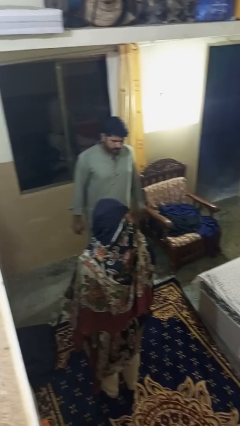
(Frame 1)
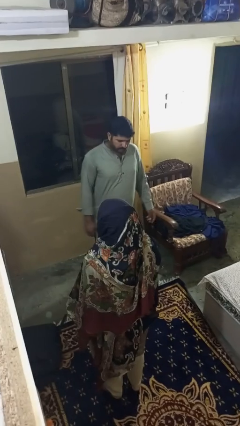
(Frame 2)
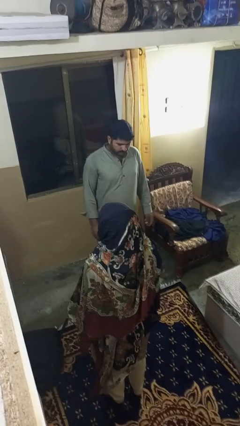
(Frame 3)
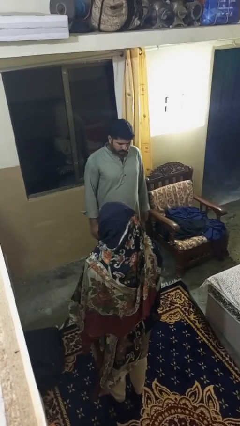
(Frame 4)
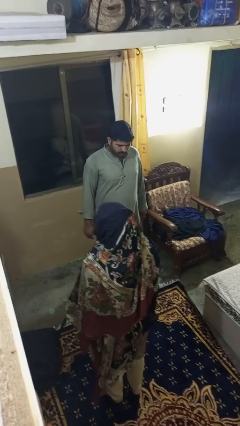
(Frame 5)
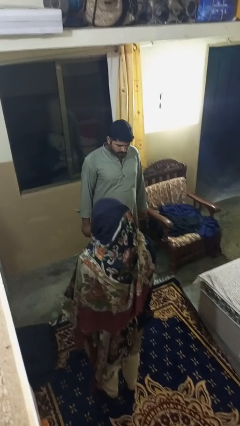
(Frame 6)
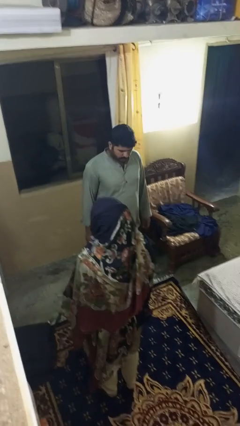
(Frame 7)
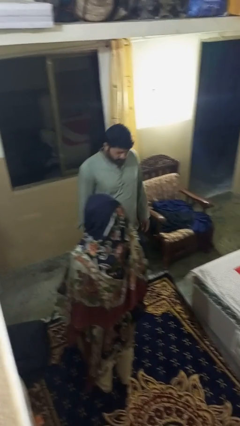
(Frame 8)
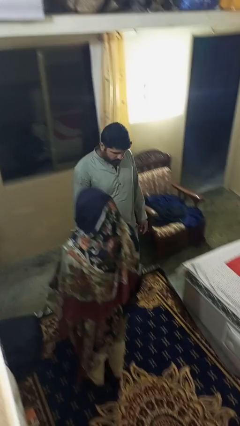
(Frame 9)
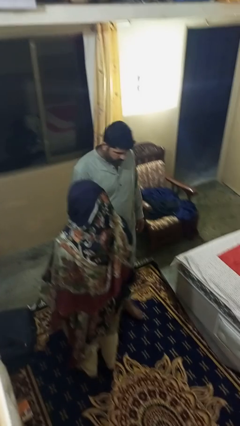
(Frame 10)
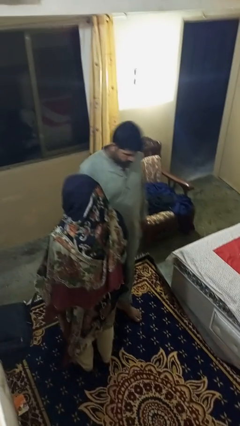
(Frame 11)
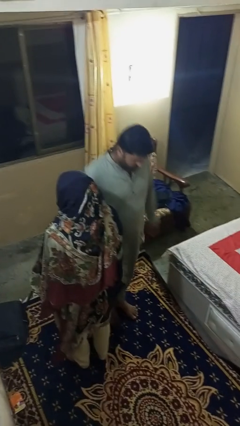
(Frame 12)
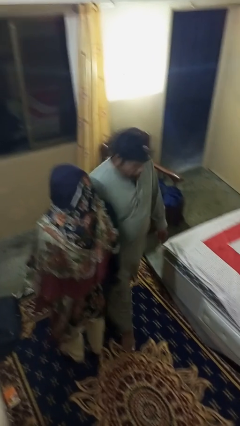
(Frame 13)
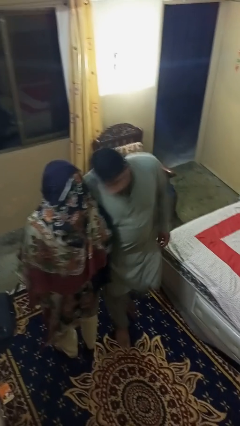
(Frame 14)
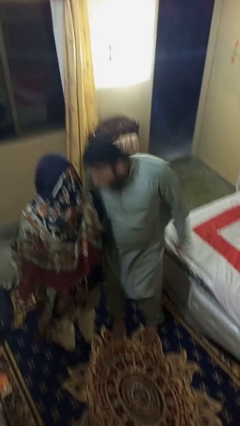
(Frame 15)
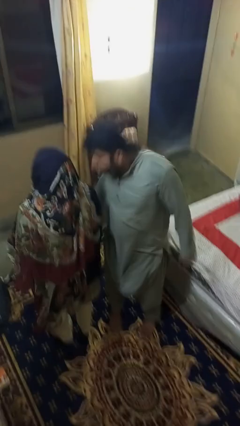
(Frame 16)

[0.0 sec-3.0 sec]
person bumps into person

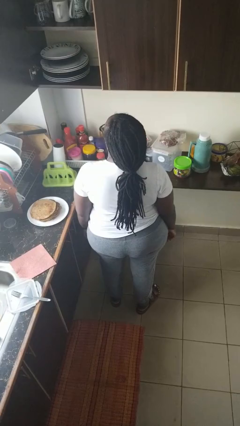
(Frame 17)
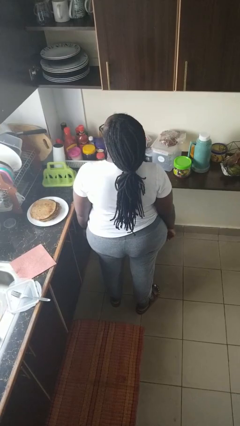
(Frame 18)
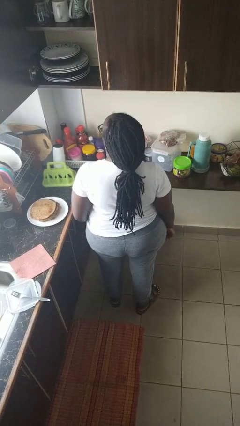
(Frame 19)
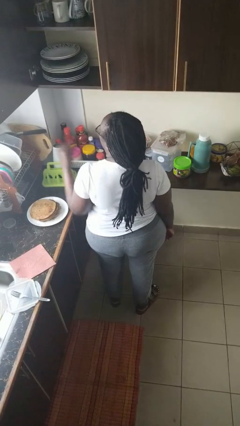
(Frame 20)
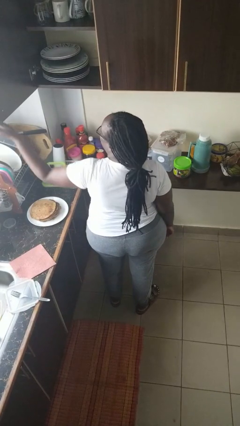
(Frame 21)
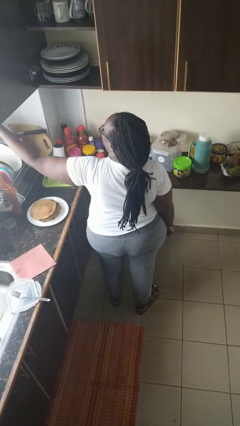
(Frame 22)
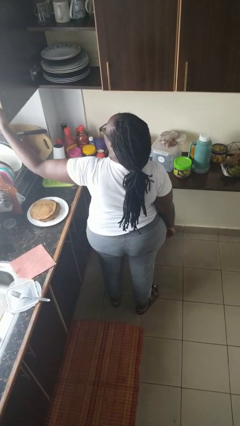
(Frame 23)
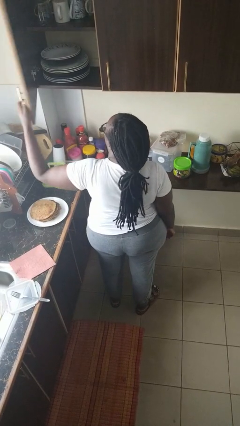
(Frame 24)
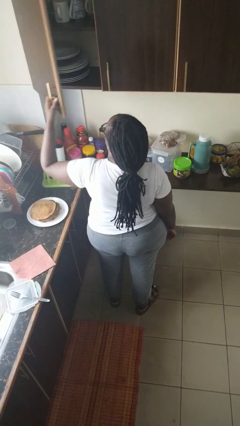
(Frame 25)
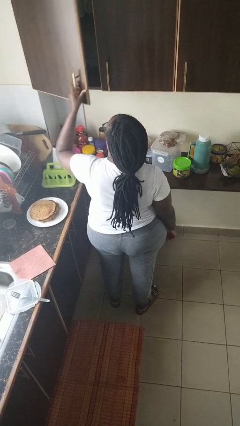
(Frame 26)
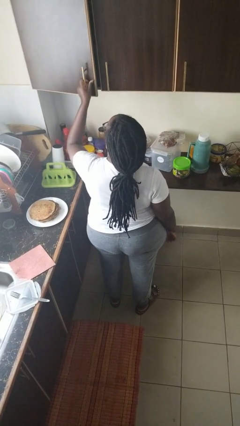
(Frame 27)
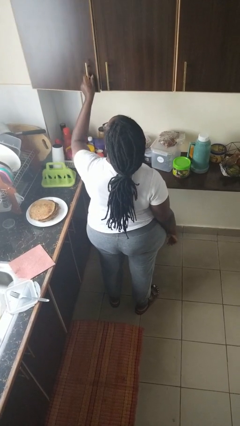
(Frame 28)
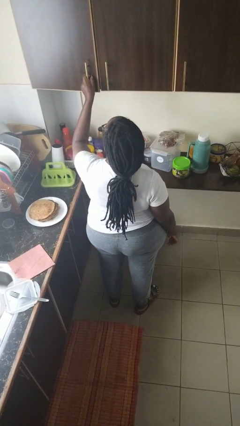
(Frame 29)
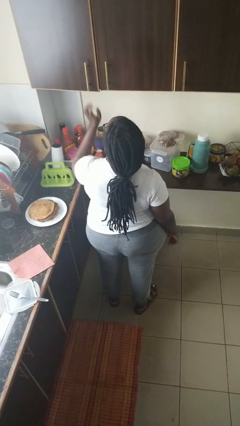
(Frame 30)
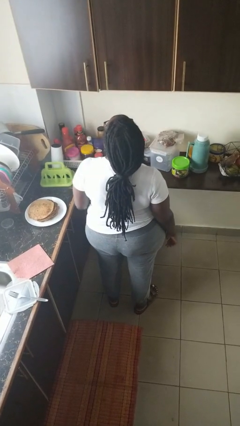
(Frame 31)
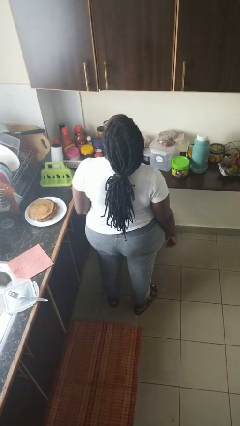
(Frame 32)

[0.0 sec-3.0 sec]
person closes cabinet

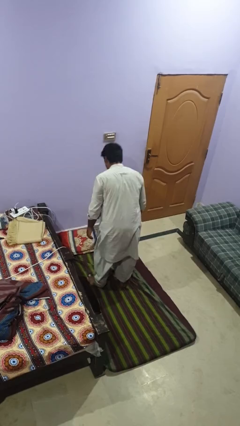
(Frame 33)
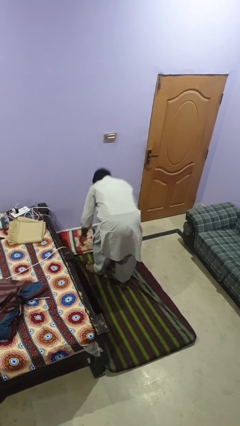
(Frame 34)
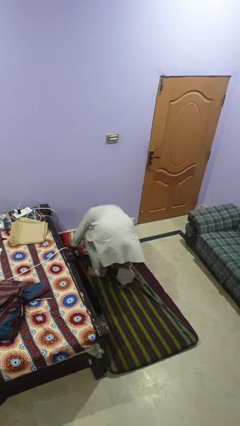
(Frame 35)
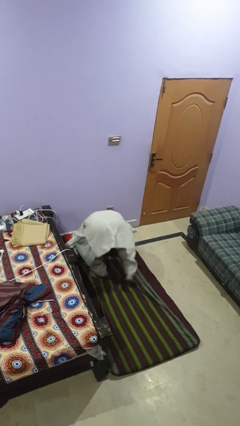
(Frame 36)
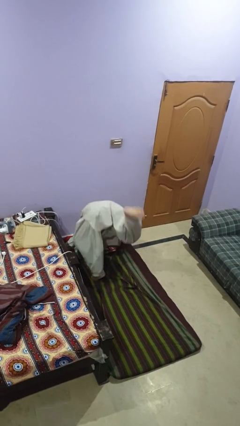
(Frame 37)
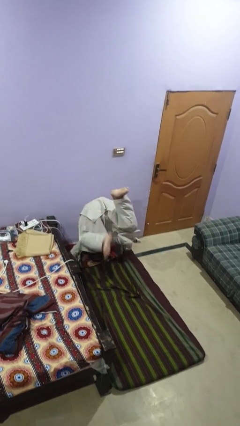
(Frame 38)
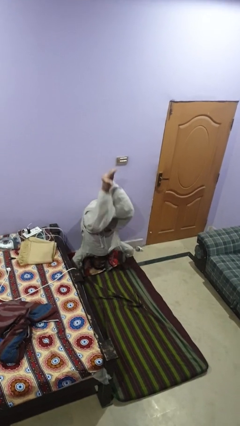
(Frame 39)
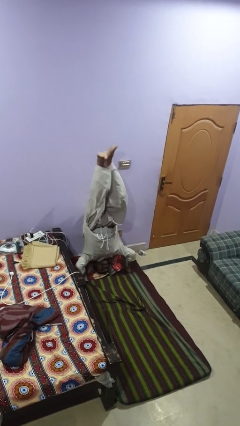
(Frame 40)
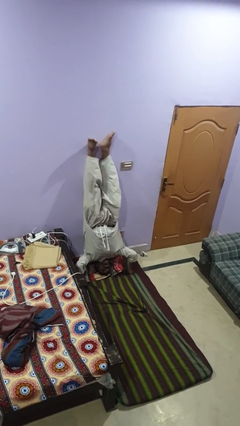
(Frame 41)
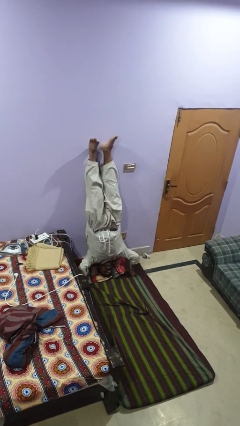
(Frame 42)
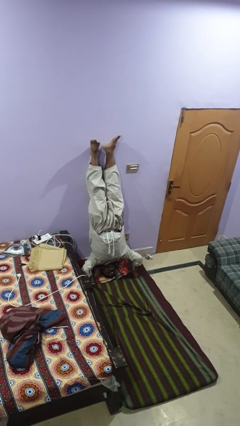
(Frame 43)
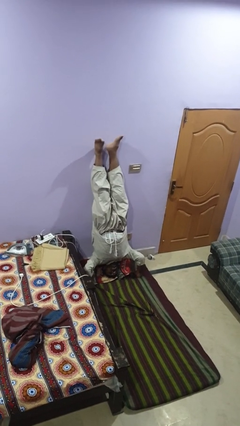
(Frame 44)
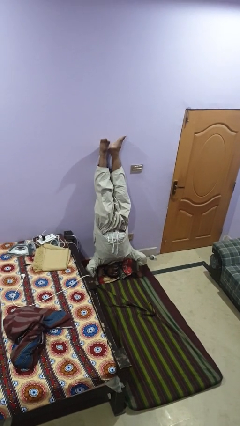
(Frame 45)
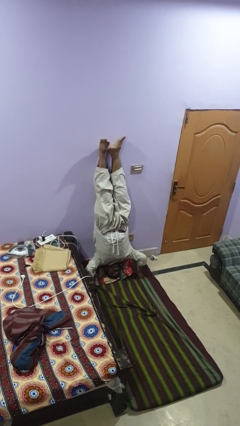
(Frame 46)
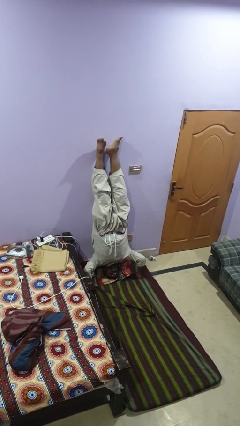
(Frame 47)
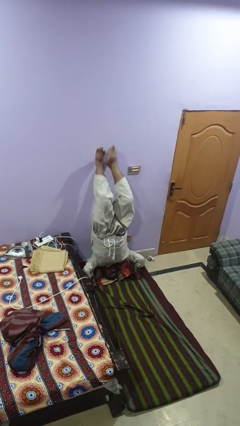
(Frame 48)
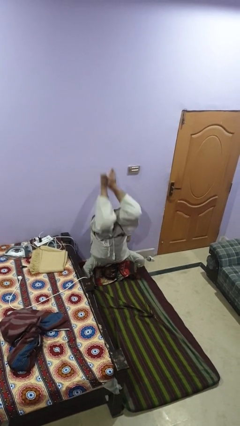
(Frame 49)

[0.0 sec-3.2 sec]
person handstand

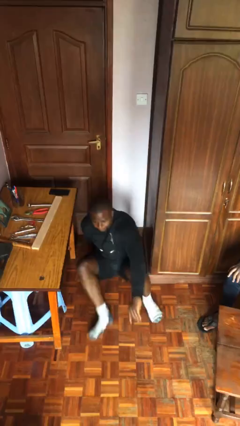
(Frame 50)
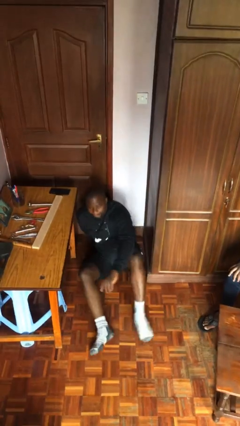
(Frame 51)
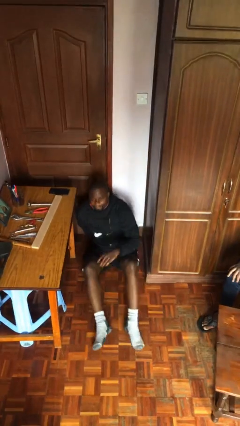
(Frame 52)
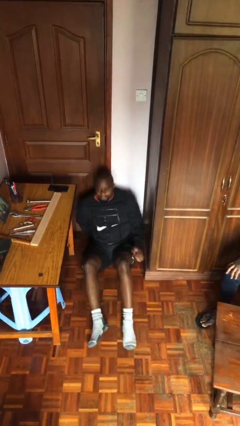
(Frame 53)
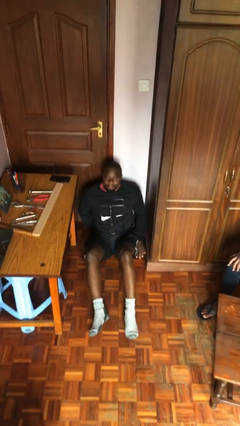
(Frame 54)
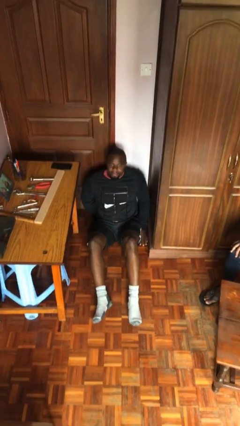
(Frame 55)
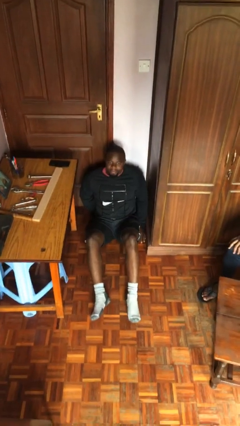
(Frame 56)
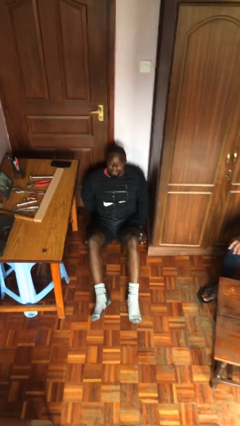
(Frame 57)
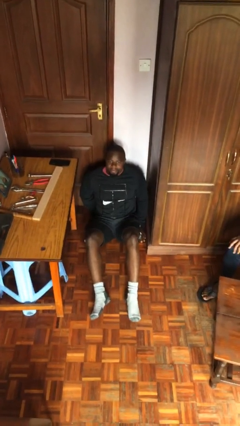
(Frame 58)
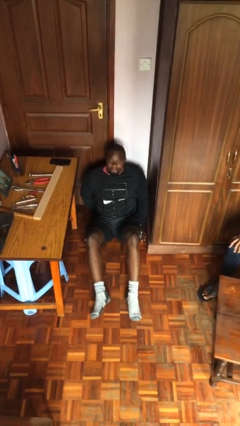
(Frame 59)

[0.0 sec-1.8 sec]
person sits down

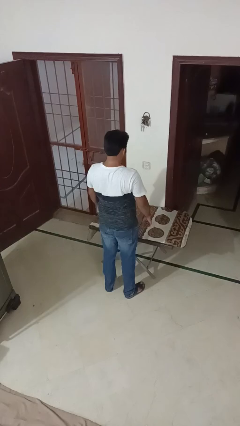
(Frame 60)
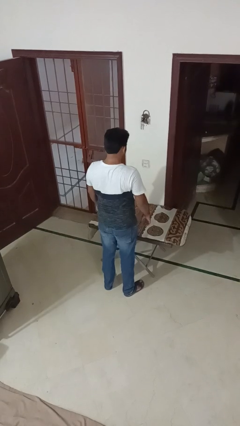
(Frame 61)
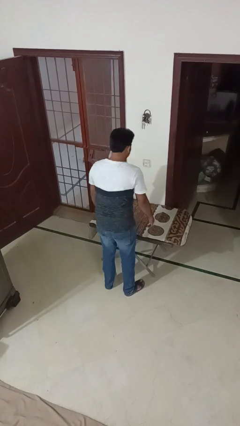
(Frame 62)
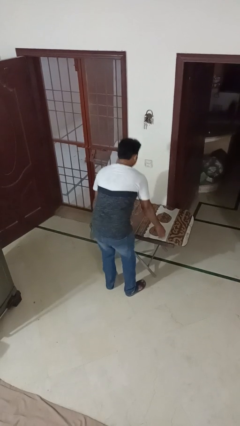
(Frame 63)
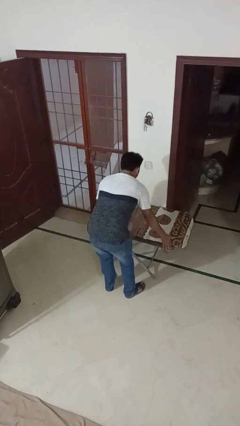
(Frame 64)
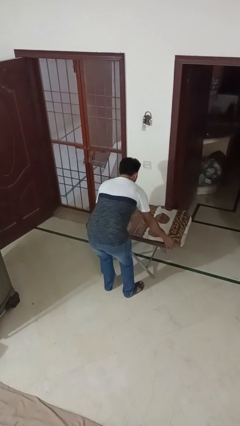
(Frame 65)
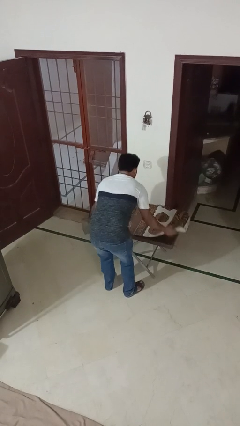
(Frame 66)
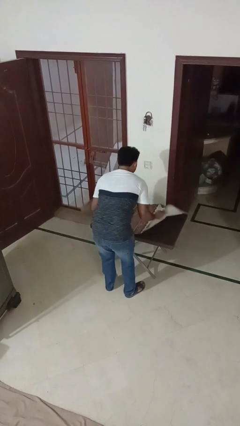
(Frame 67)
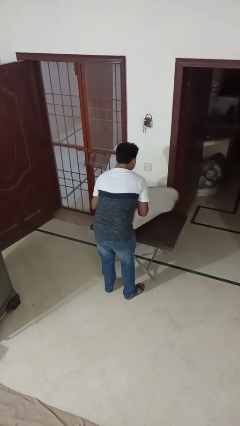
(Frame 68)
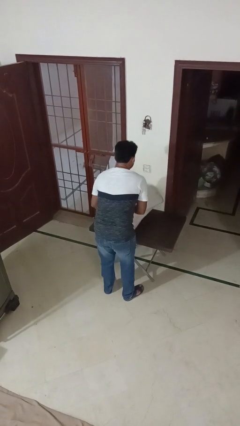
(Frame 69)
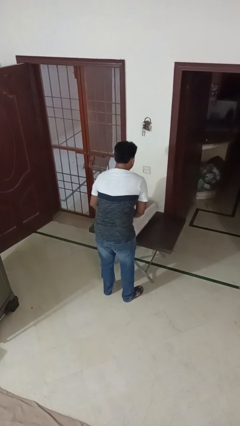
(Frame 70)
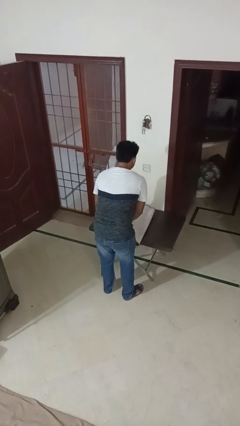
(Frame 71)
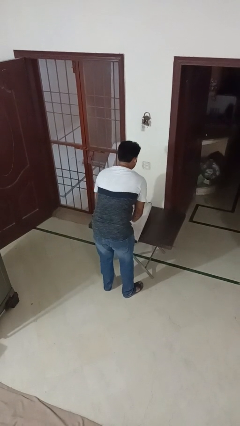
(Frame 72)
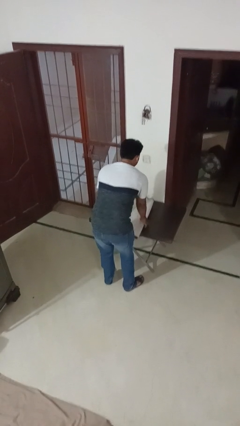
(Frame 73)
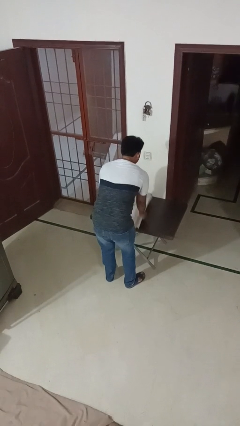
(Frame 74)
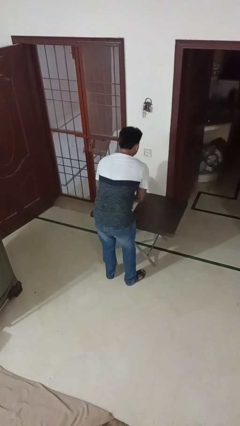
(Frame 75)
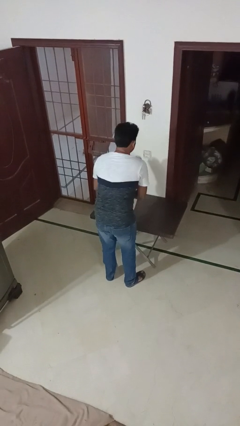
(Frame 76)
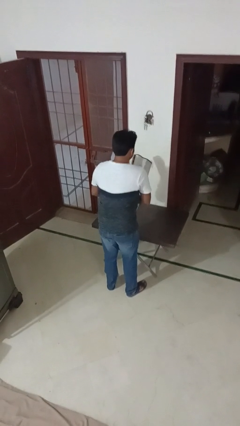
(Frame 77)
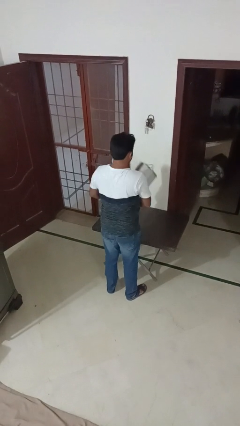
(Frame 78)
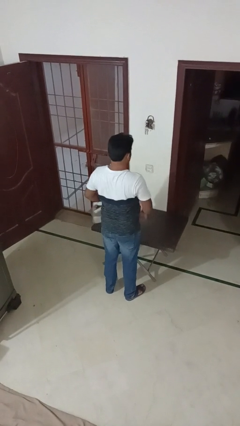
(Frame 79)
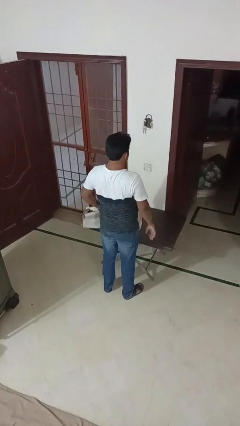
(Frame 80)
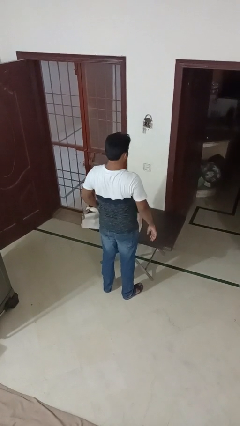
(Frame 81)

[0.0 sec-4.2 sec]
person folds tablecloth

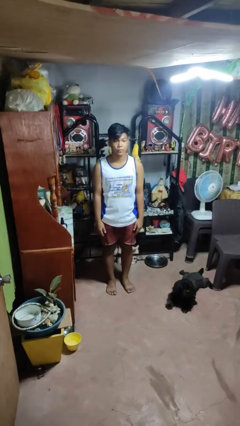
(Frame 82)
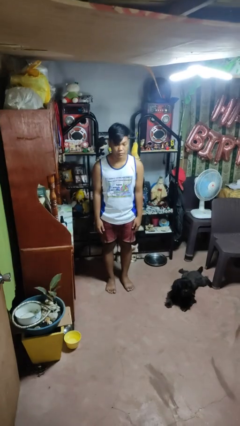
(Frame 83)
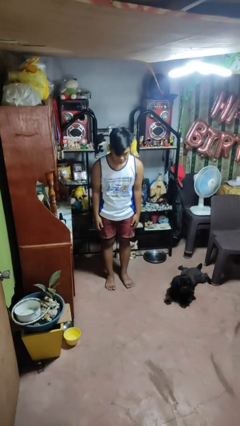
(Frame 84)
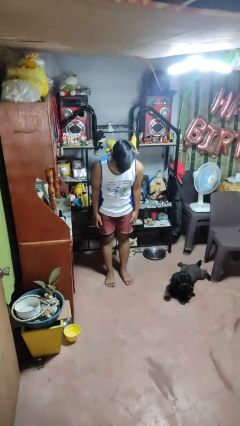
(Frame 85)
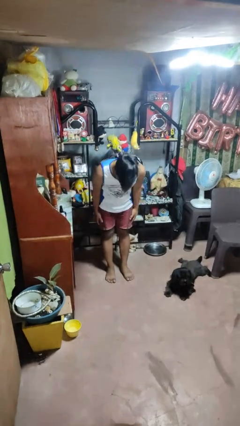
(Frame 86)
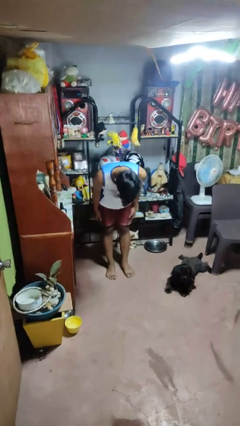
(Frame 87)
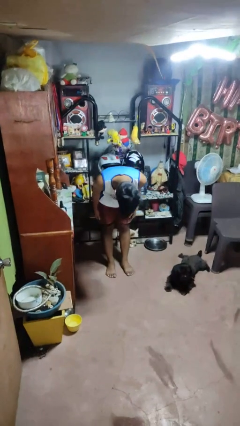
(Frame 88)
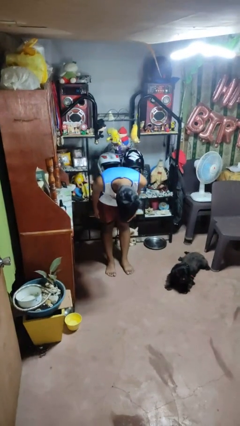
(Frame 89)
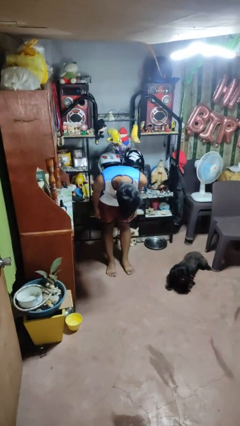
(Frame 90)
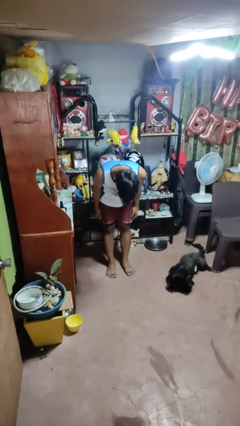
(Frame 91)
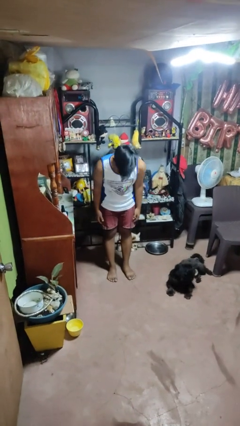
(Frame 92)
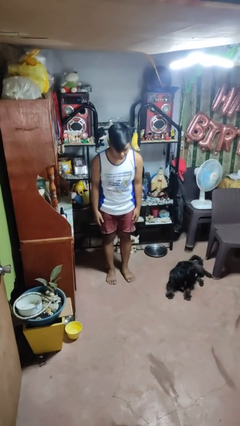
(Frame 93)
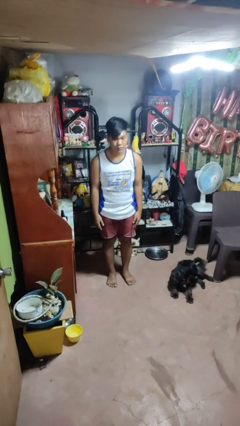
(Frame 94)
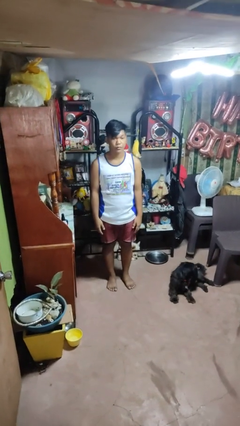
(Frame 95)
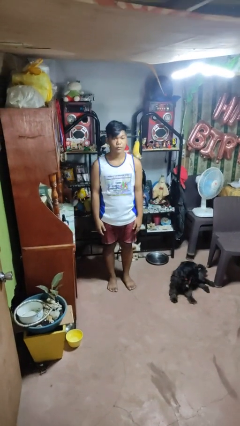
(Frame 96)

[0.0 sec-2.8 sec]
person bows
